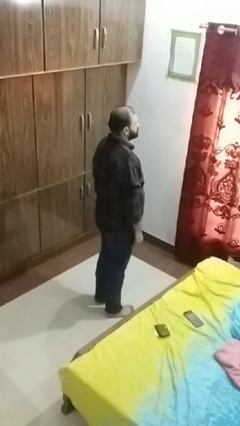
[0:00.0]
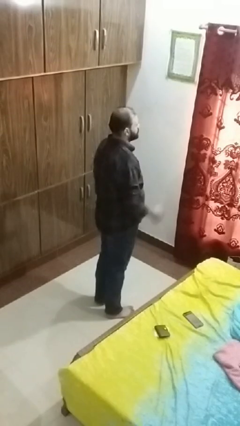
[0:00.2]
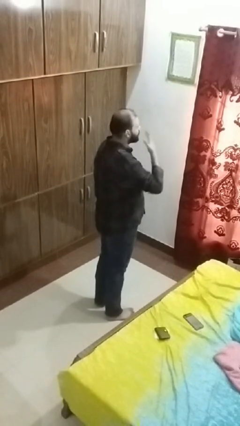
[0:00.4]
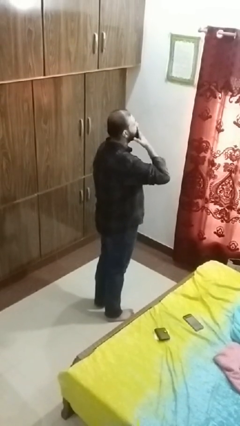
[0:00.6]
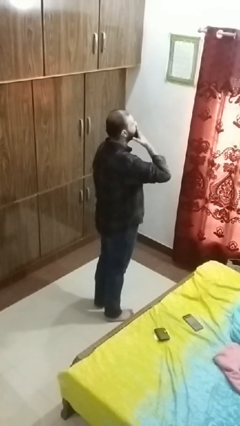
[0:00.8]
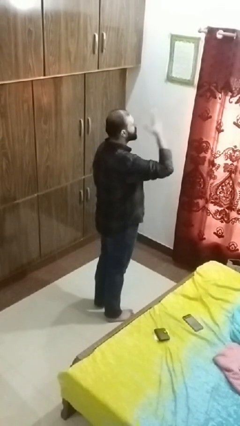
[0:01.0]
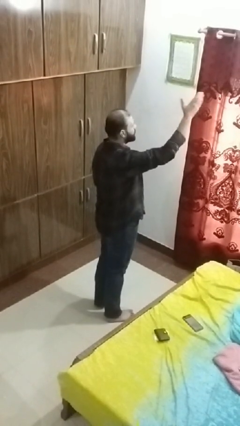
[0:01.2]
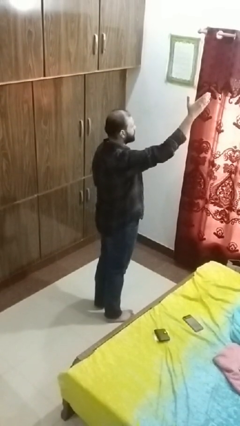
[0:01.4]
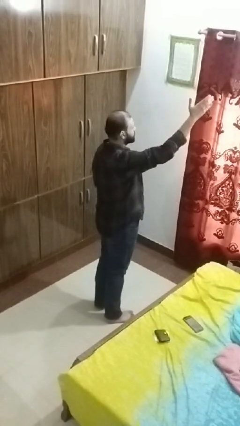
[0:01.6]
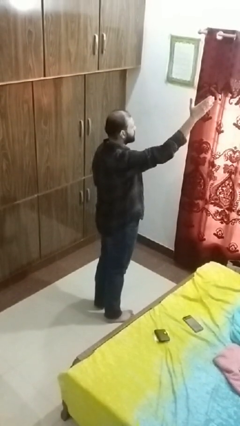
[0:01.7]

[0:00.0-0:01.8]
person gestures blow kiss

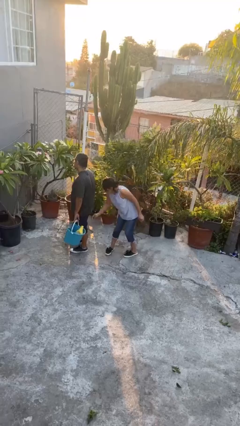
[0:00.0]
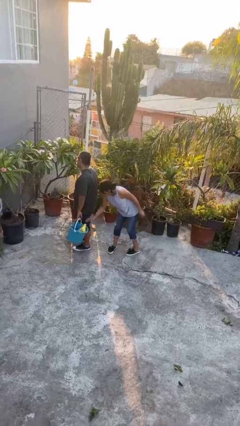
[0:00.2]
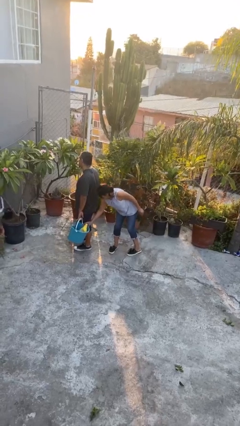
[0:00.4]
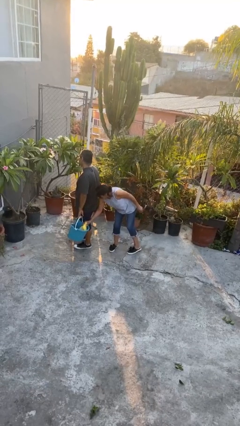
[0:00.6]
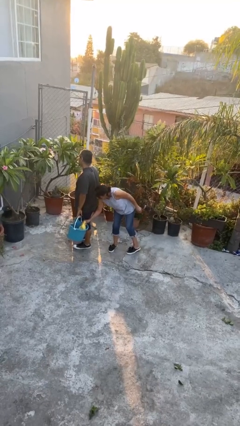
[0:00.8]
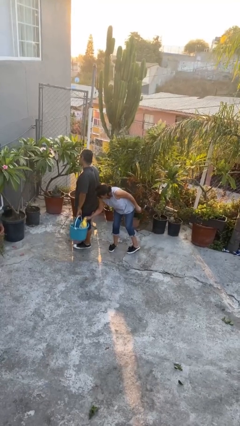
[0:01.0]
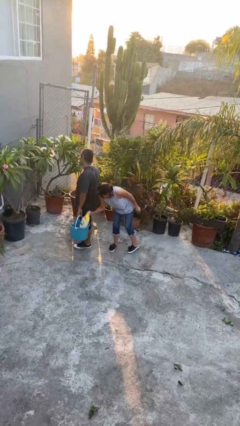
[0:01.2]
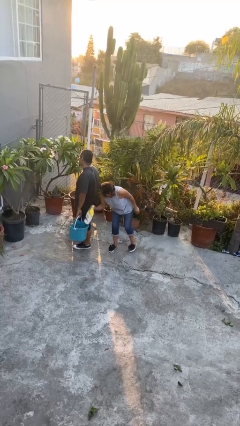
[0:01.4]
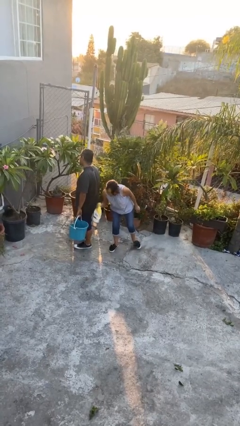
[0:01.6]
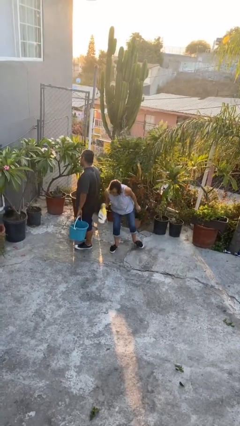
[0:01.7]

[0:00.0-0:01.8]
person steals object from person

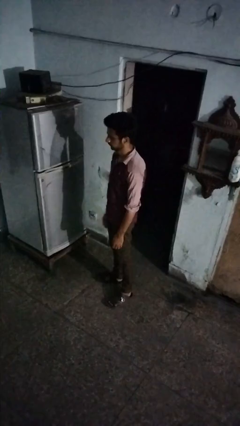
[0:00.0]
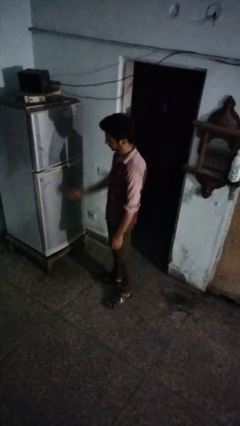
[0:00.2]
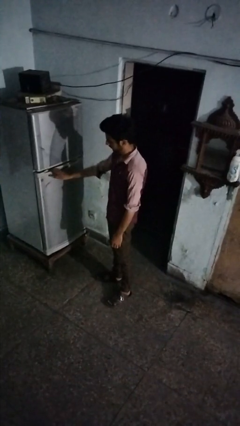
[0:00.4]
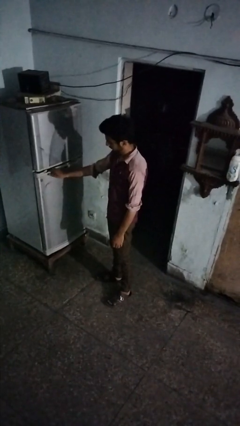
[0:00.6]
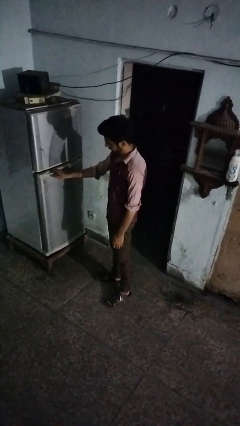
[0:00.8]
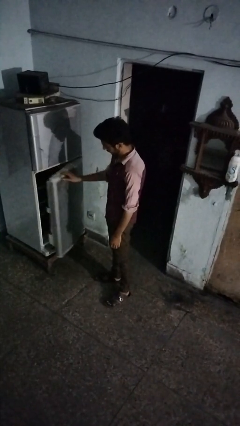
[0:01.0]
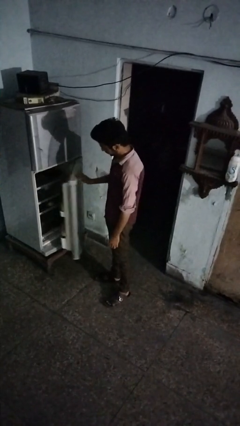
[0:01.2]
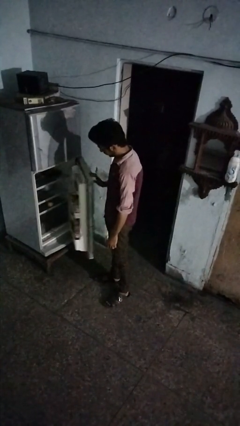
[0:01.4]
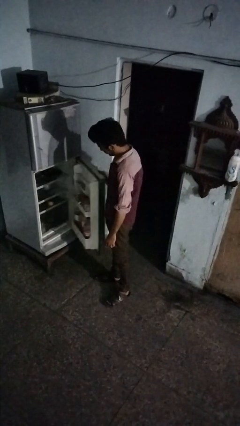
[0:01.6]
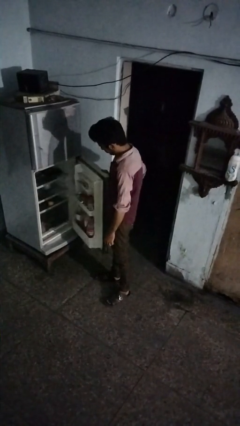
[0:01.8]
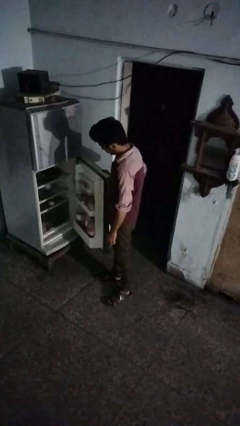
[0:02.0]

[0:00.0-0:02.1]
person opens refrigerator

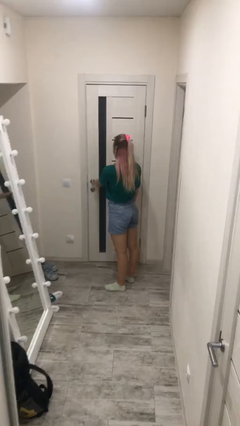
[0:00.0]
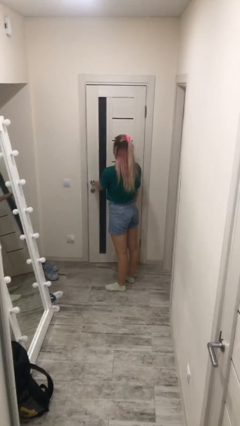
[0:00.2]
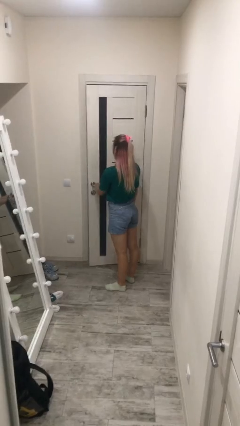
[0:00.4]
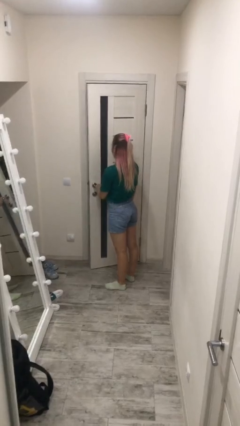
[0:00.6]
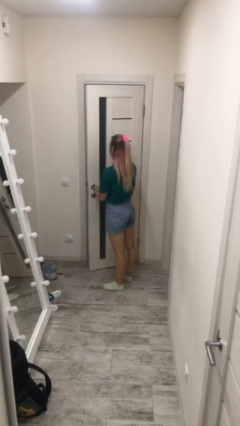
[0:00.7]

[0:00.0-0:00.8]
person opens facility door

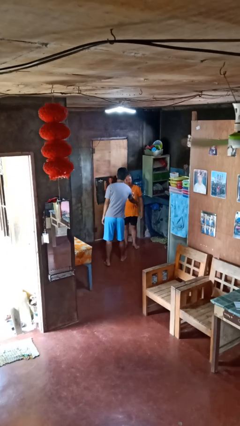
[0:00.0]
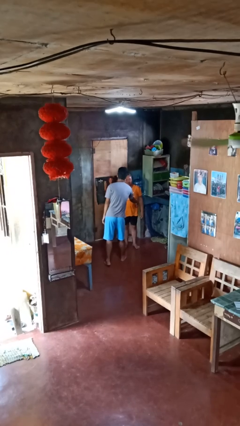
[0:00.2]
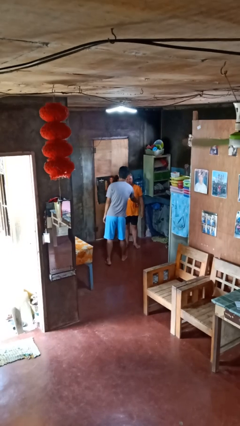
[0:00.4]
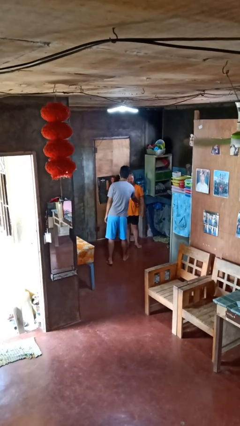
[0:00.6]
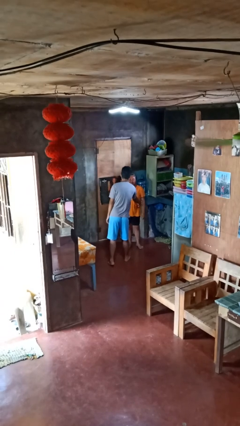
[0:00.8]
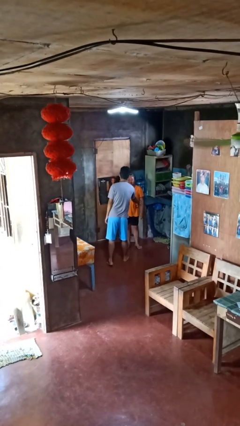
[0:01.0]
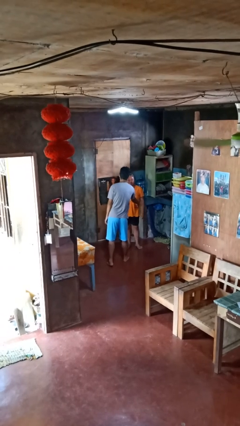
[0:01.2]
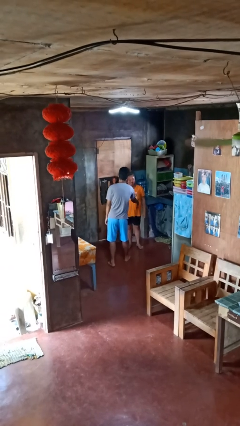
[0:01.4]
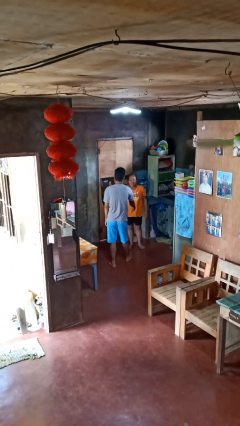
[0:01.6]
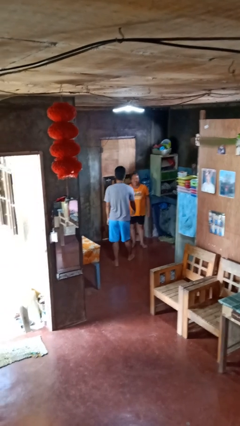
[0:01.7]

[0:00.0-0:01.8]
person tickles person

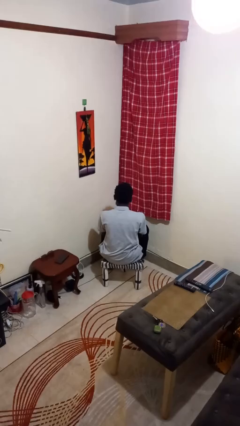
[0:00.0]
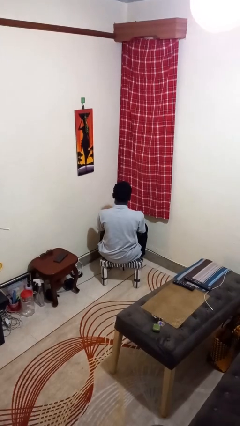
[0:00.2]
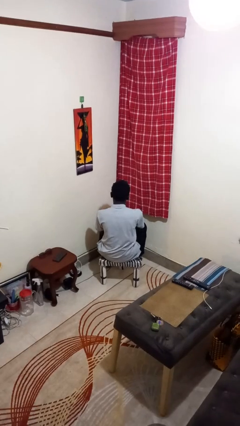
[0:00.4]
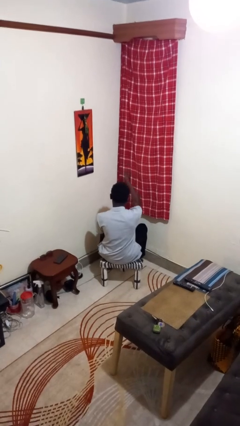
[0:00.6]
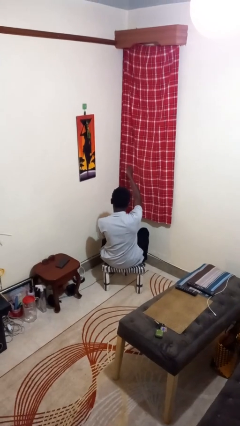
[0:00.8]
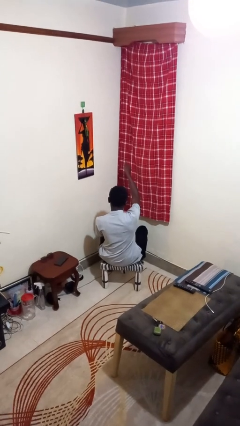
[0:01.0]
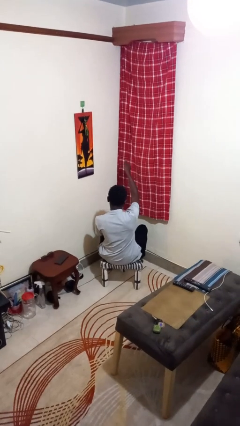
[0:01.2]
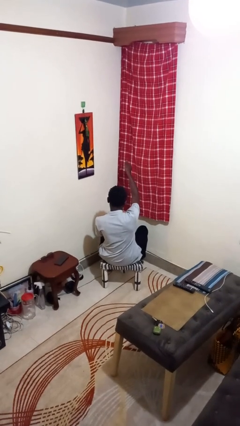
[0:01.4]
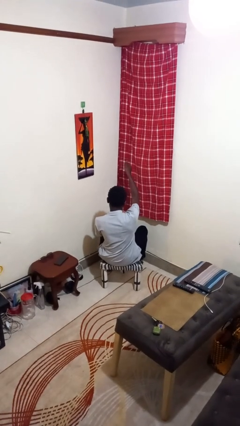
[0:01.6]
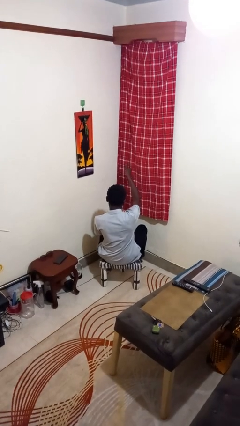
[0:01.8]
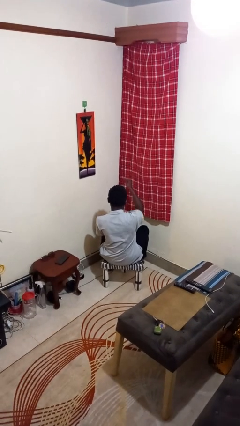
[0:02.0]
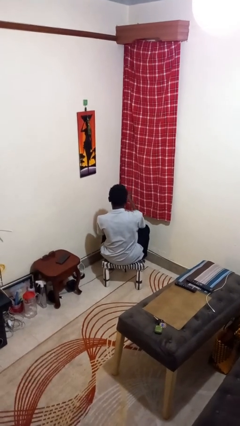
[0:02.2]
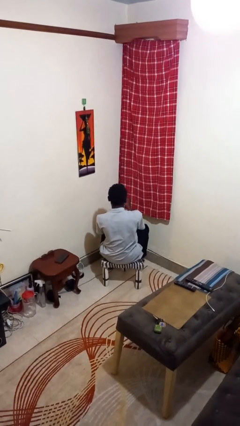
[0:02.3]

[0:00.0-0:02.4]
person gestures thumbs up

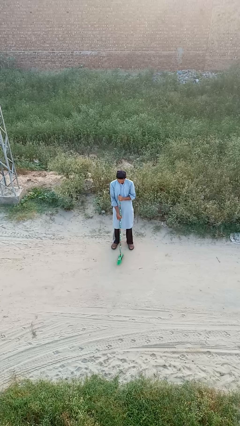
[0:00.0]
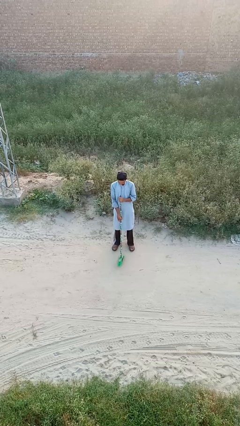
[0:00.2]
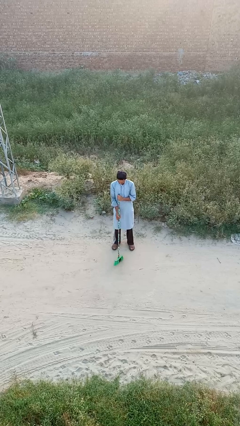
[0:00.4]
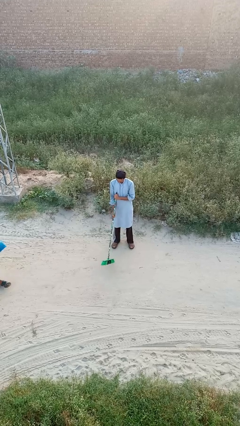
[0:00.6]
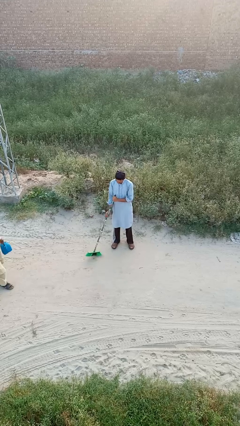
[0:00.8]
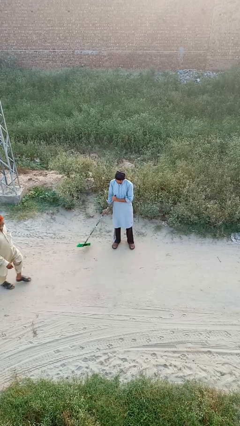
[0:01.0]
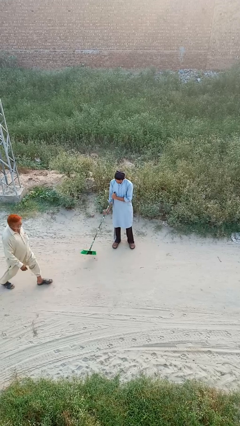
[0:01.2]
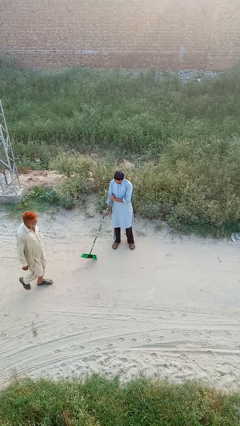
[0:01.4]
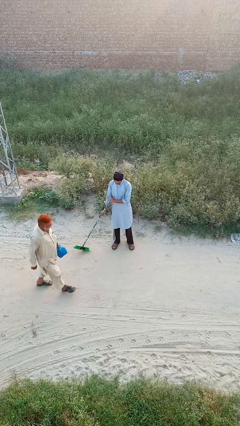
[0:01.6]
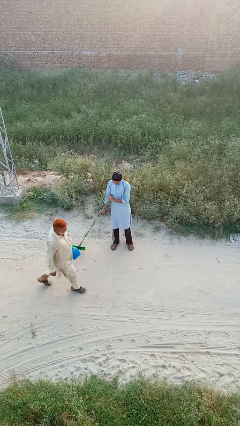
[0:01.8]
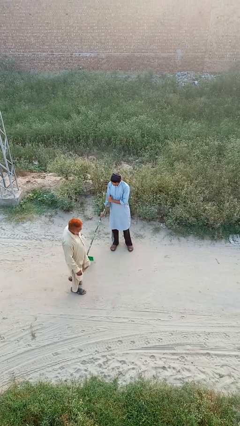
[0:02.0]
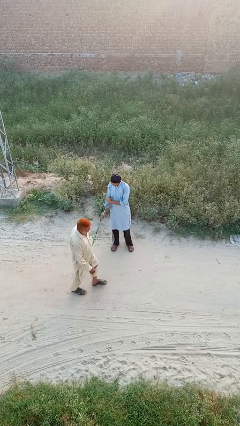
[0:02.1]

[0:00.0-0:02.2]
person sweeps floor

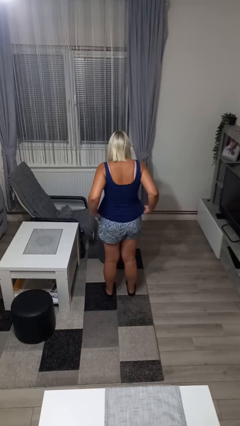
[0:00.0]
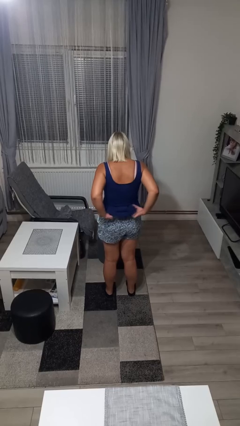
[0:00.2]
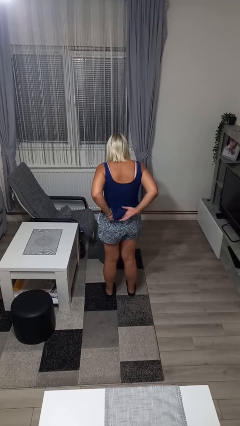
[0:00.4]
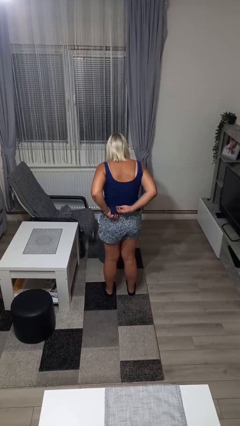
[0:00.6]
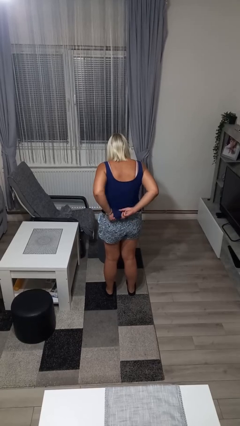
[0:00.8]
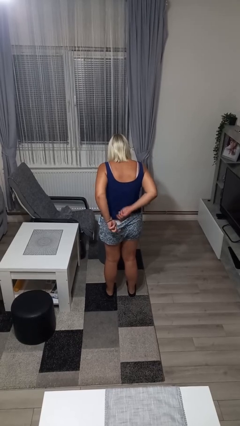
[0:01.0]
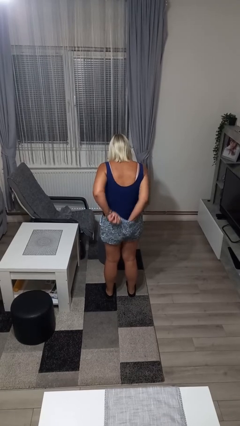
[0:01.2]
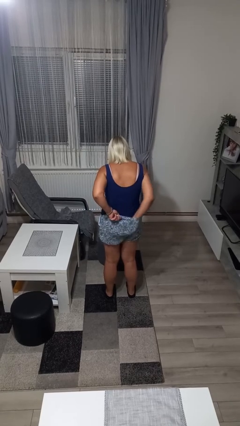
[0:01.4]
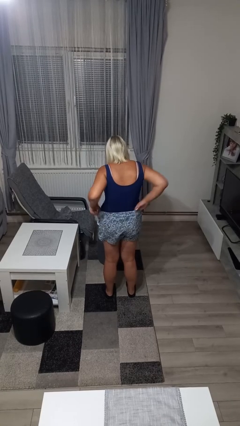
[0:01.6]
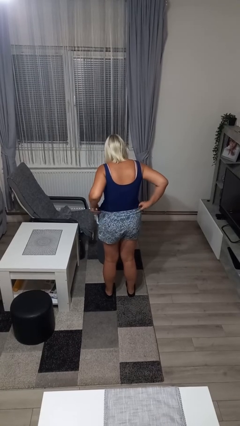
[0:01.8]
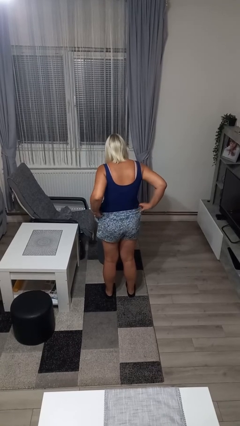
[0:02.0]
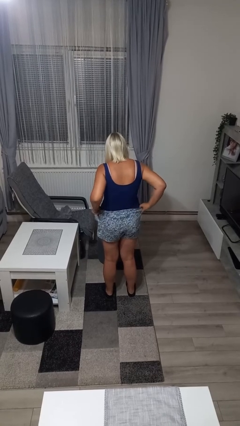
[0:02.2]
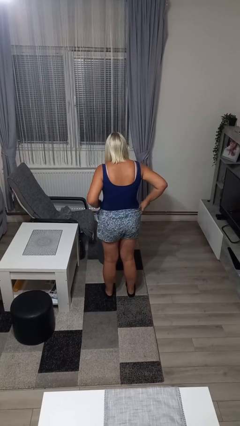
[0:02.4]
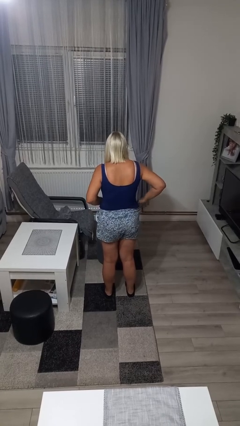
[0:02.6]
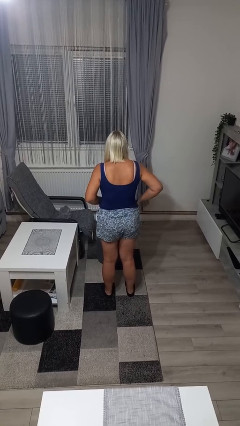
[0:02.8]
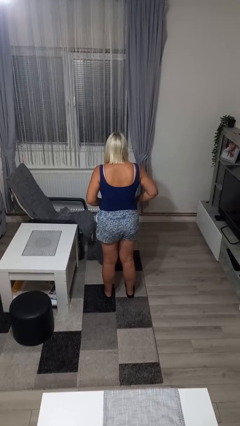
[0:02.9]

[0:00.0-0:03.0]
person tucks in shirt

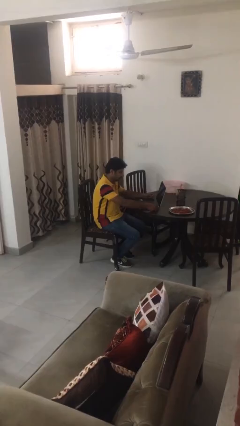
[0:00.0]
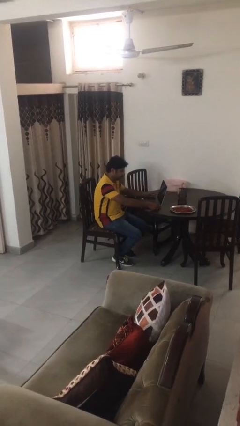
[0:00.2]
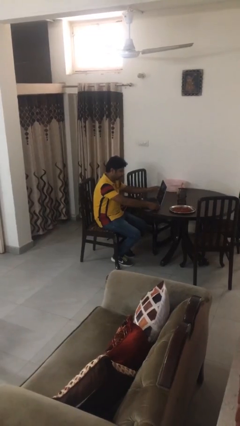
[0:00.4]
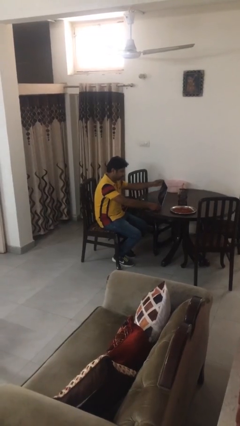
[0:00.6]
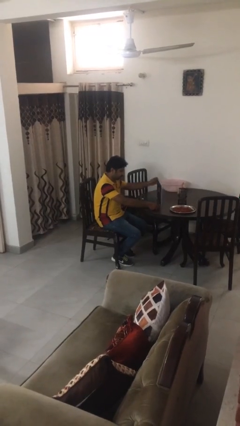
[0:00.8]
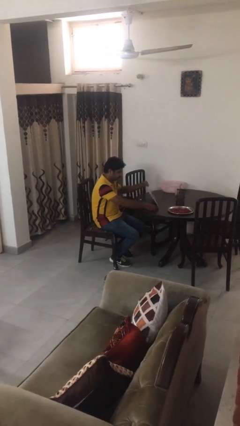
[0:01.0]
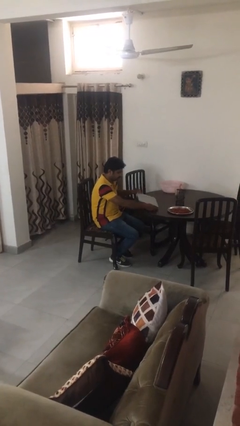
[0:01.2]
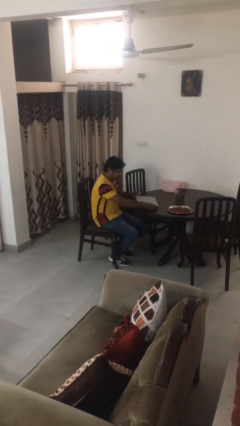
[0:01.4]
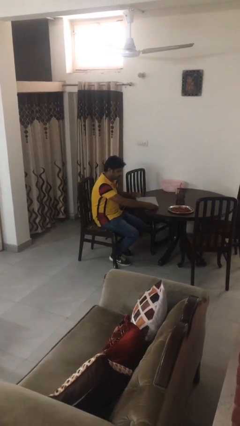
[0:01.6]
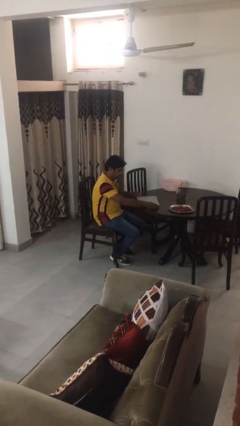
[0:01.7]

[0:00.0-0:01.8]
person closes laptop
